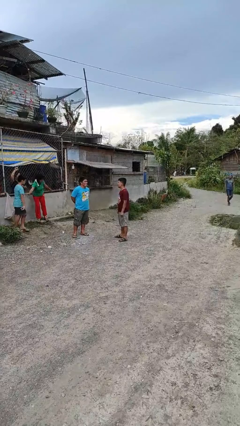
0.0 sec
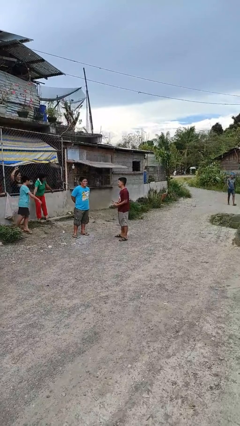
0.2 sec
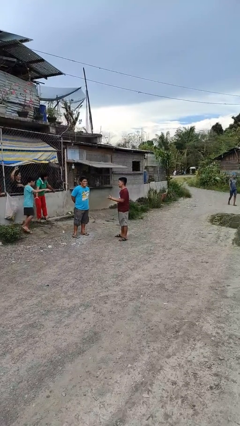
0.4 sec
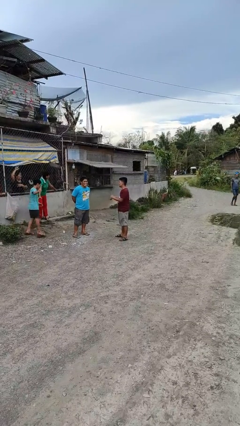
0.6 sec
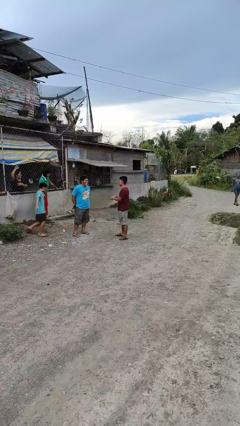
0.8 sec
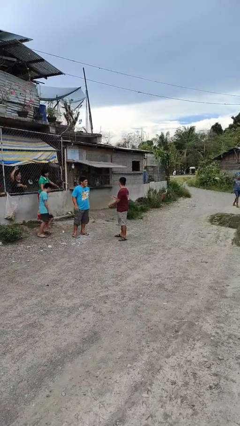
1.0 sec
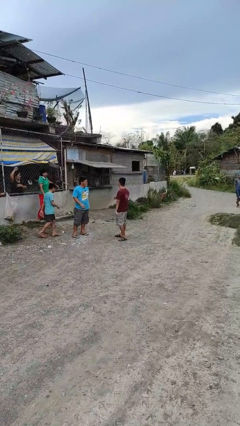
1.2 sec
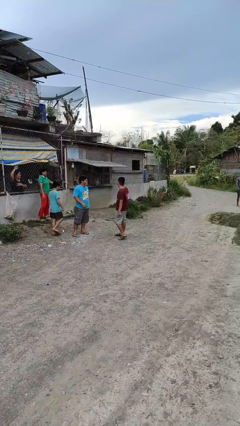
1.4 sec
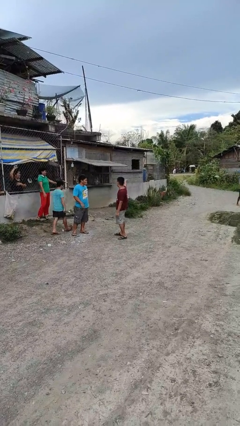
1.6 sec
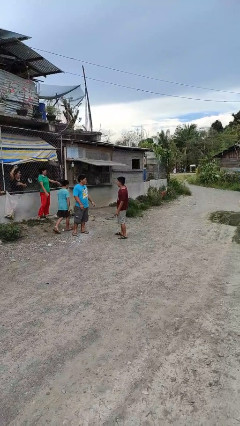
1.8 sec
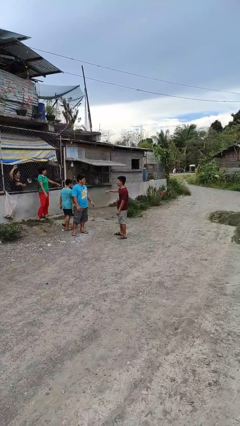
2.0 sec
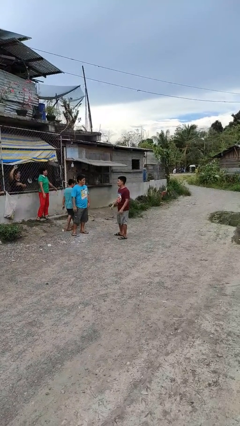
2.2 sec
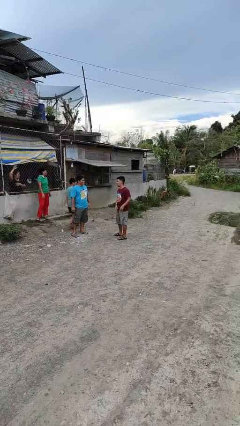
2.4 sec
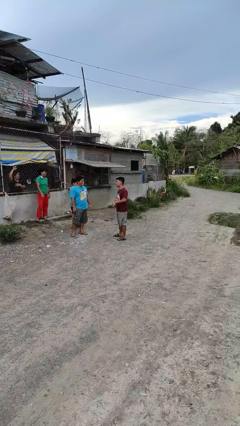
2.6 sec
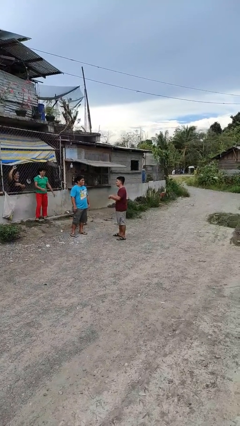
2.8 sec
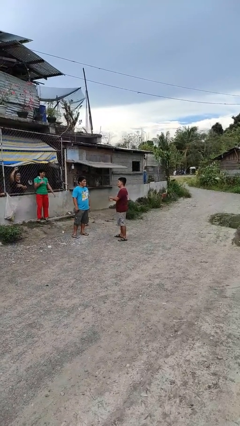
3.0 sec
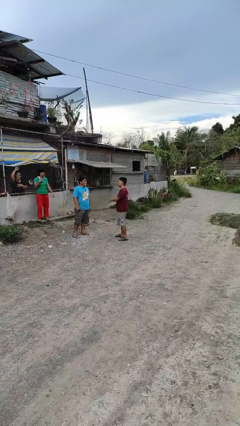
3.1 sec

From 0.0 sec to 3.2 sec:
person talks to person

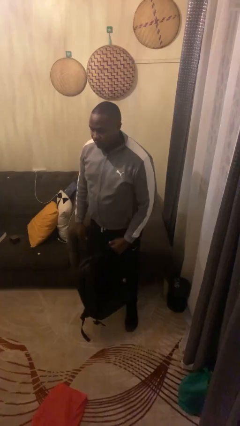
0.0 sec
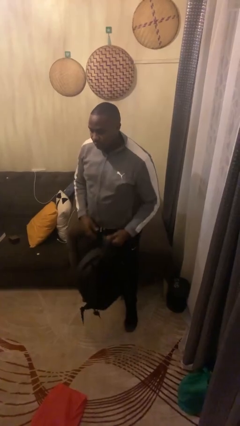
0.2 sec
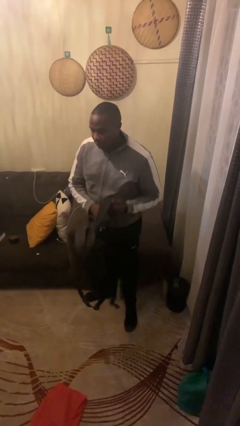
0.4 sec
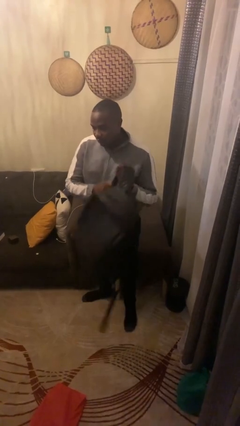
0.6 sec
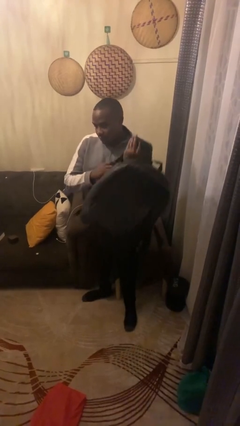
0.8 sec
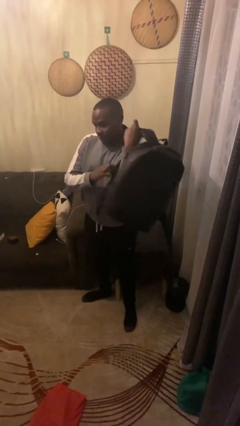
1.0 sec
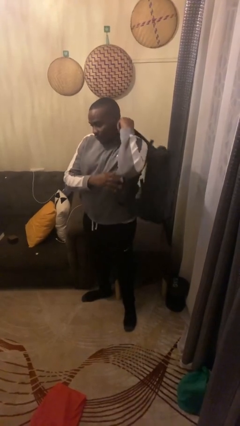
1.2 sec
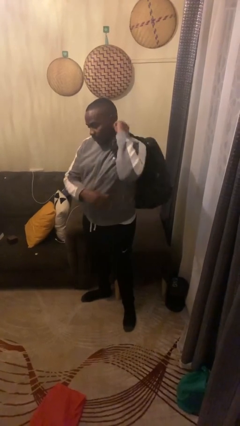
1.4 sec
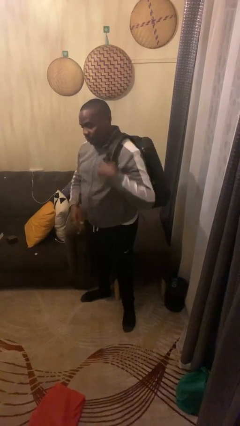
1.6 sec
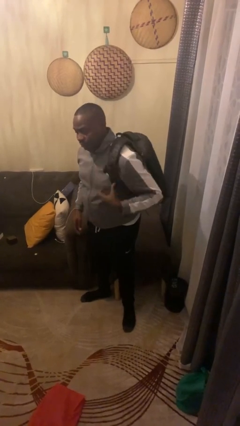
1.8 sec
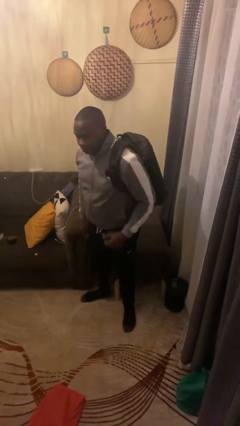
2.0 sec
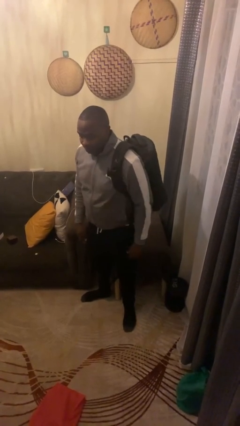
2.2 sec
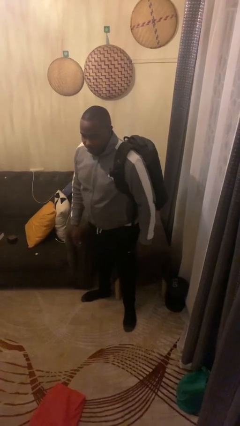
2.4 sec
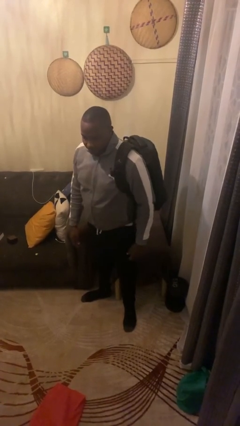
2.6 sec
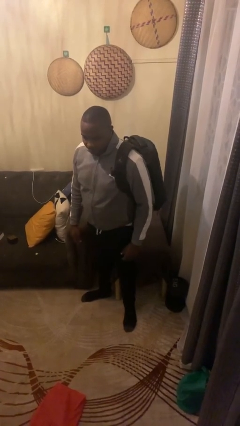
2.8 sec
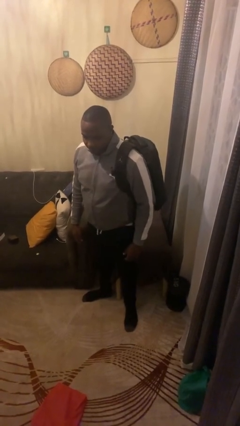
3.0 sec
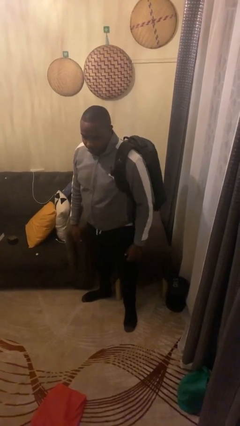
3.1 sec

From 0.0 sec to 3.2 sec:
person puts on backpack

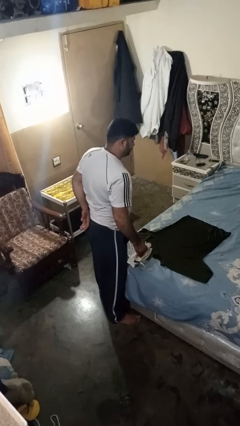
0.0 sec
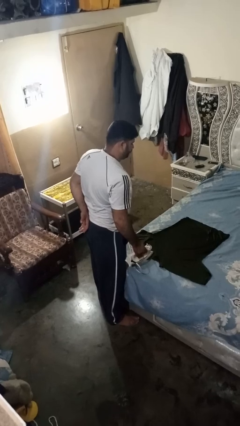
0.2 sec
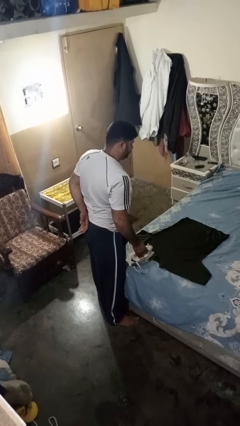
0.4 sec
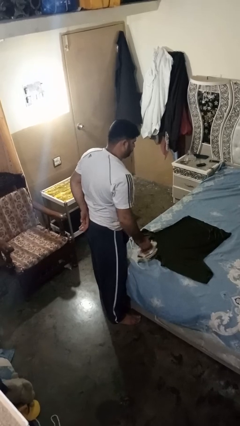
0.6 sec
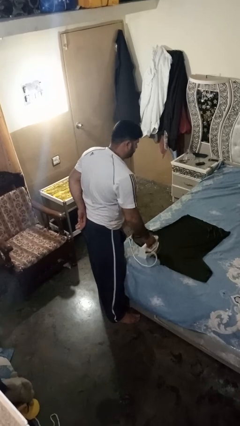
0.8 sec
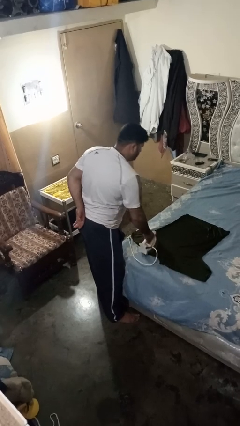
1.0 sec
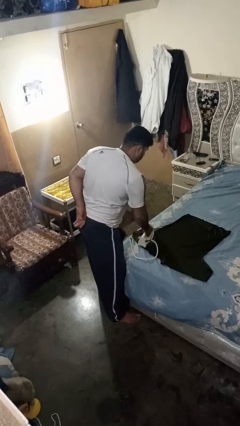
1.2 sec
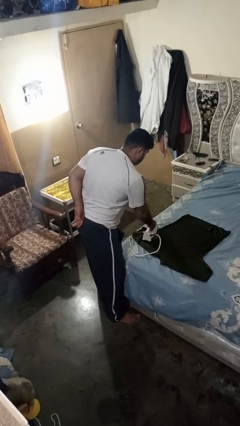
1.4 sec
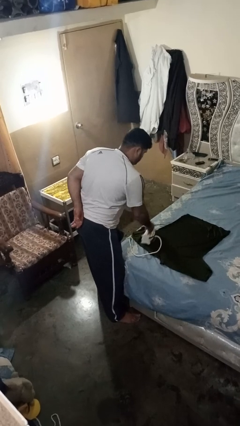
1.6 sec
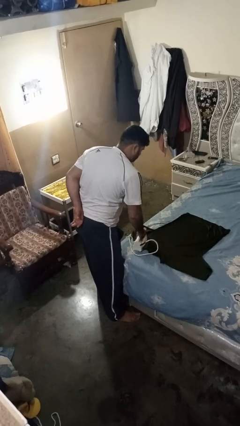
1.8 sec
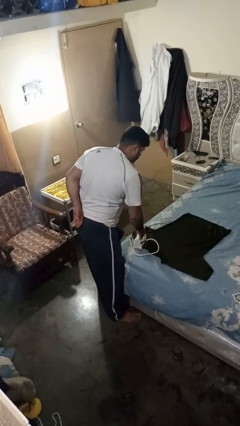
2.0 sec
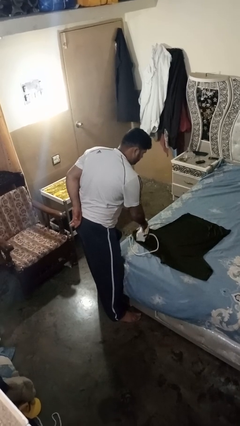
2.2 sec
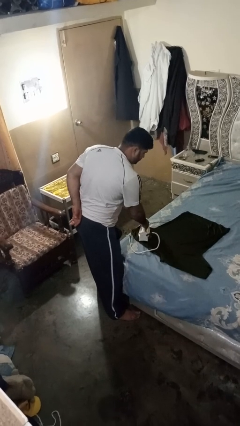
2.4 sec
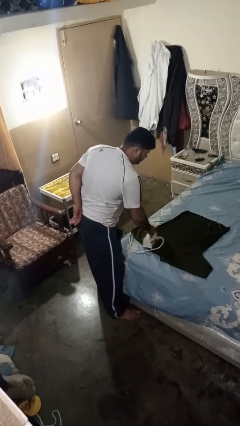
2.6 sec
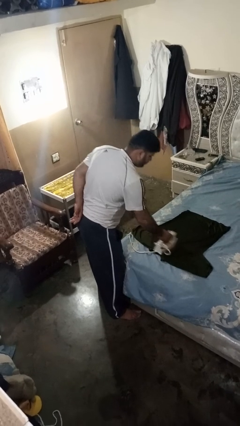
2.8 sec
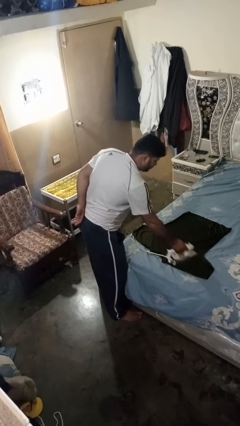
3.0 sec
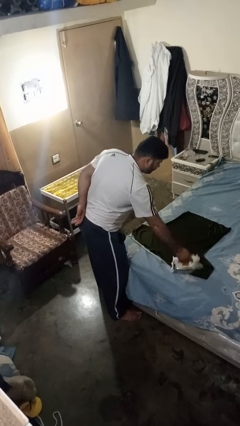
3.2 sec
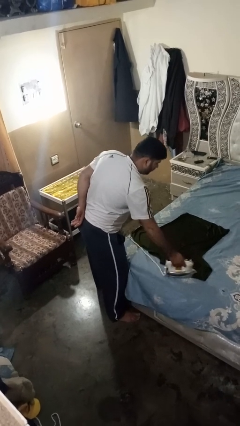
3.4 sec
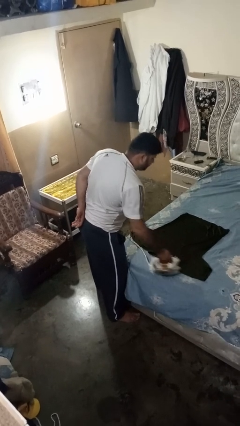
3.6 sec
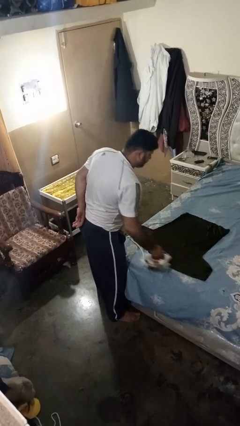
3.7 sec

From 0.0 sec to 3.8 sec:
person irons clothes

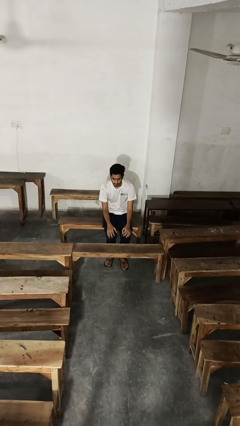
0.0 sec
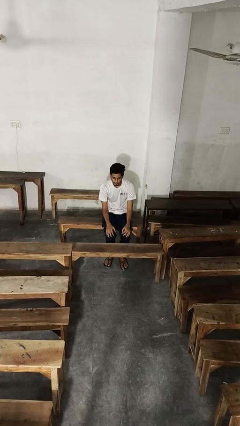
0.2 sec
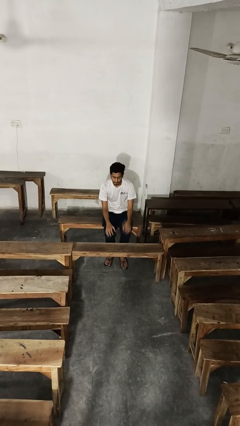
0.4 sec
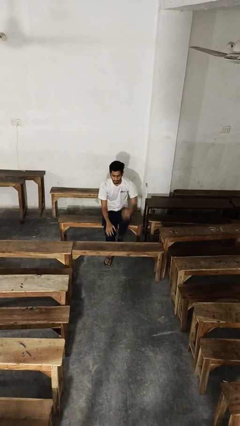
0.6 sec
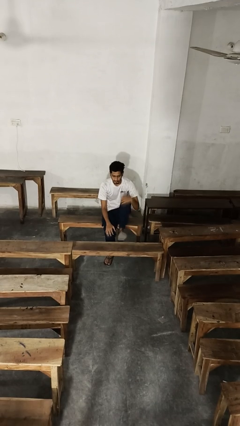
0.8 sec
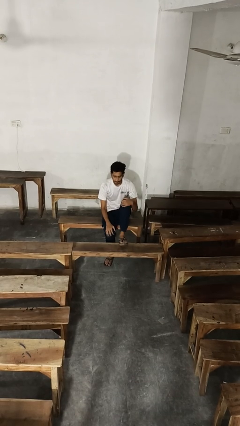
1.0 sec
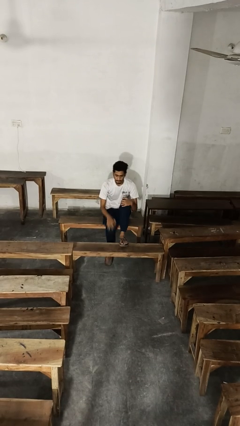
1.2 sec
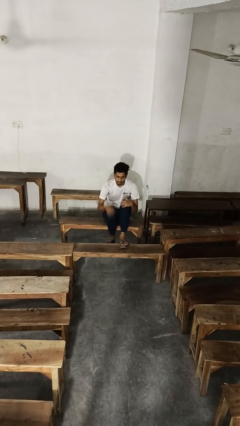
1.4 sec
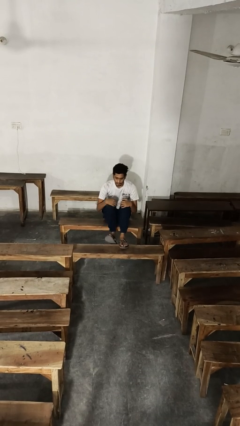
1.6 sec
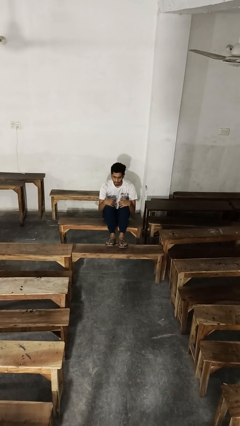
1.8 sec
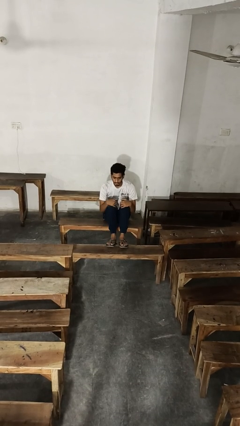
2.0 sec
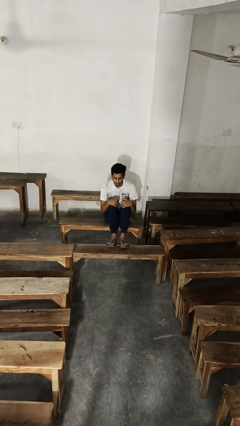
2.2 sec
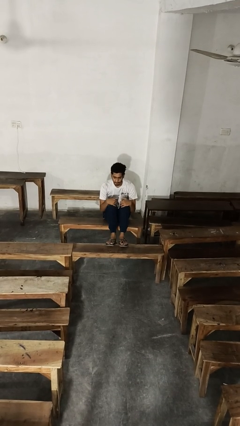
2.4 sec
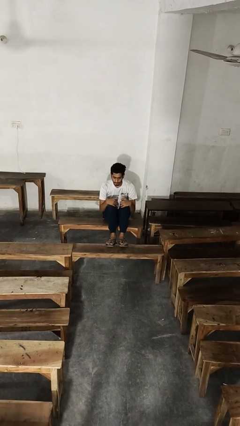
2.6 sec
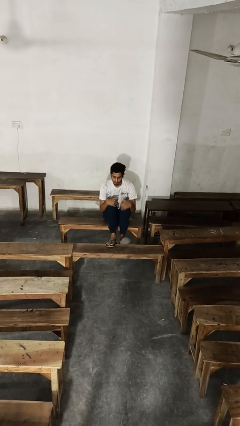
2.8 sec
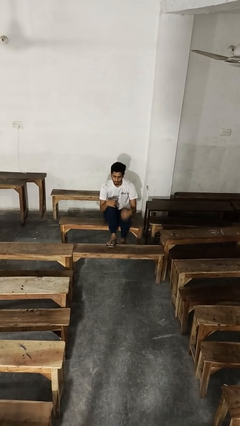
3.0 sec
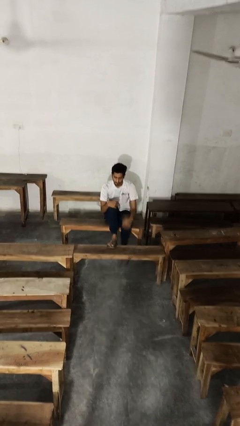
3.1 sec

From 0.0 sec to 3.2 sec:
person puts feet up

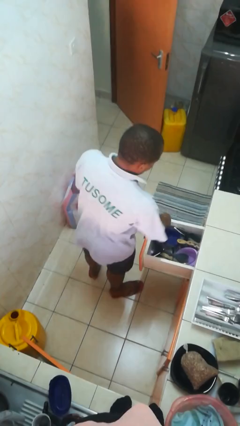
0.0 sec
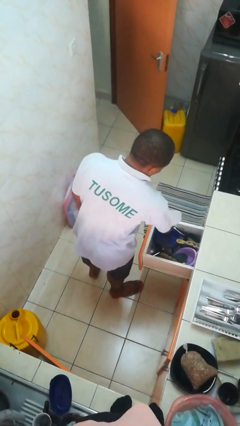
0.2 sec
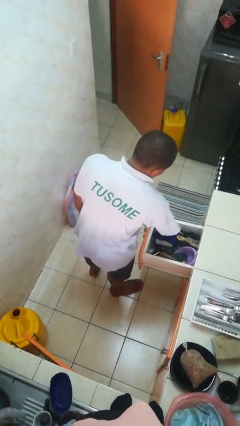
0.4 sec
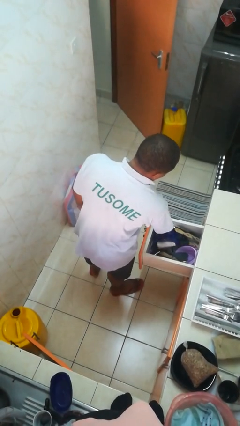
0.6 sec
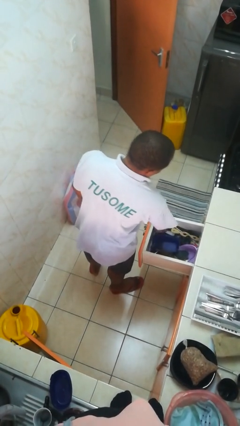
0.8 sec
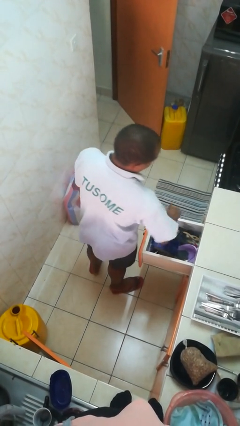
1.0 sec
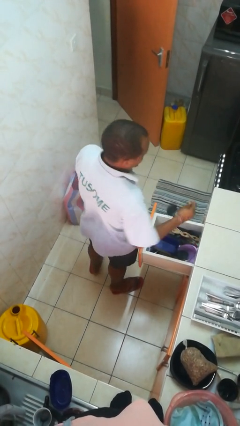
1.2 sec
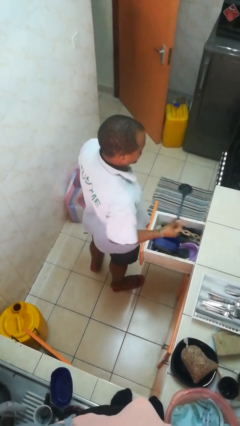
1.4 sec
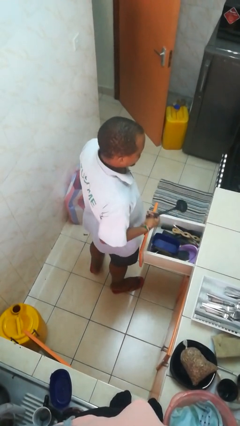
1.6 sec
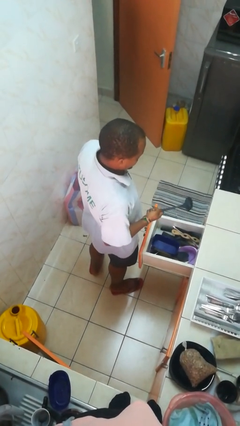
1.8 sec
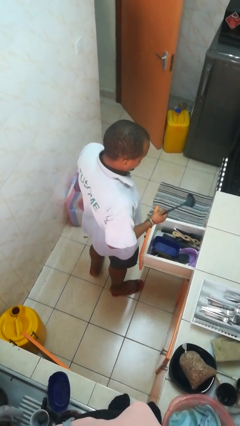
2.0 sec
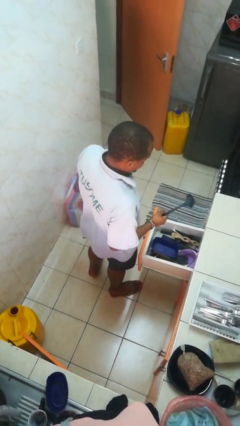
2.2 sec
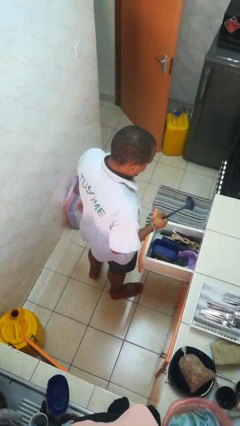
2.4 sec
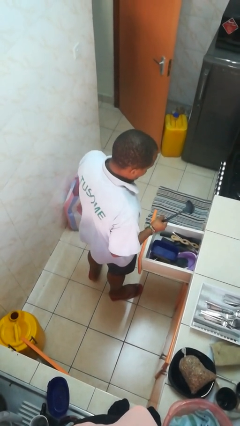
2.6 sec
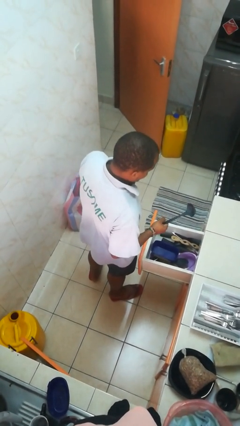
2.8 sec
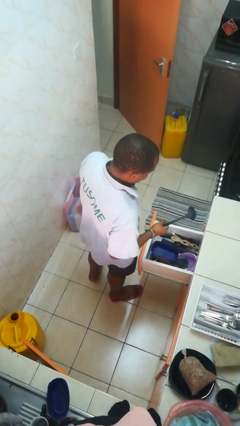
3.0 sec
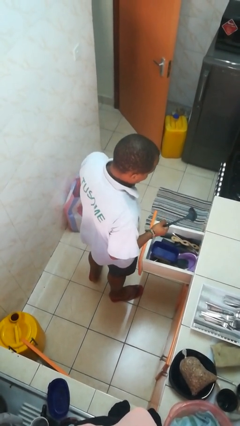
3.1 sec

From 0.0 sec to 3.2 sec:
person takes object from kitchen drawer

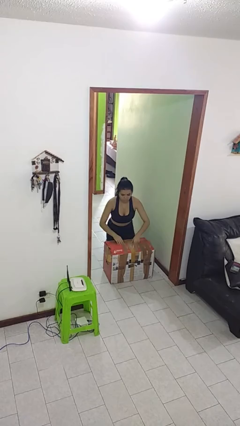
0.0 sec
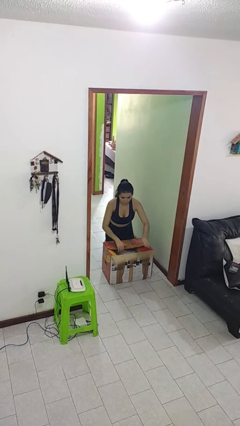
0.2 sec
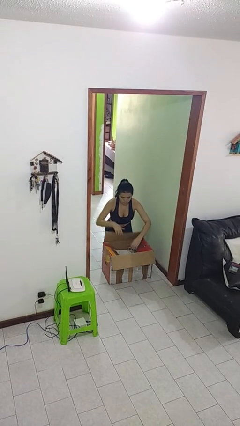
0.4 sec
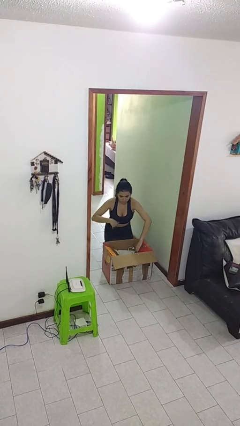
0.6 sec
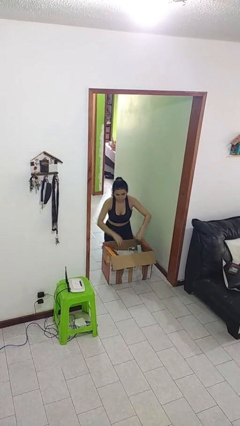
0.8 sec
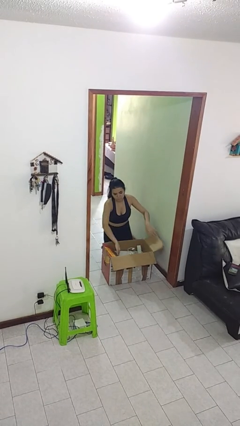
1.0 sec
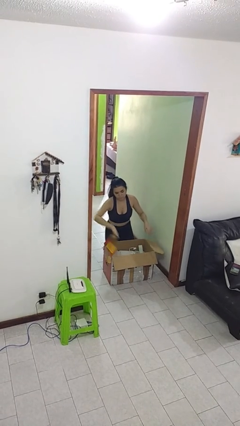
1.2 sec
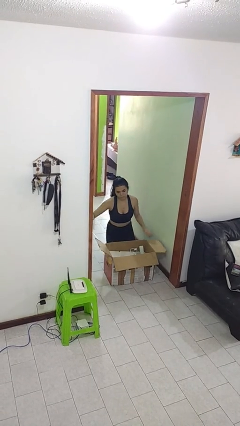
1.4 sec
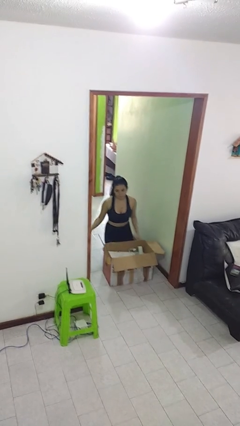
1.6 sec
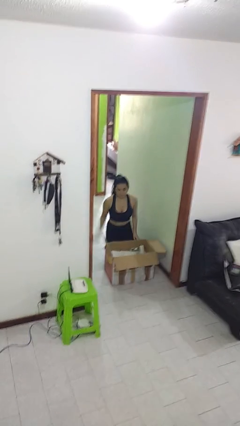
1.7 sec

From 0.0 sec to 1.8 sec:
person opens box
